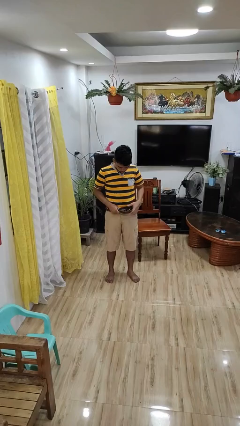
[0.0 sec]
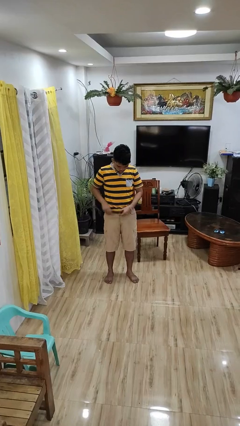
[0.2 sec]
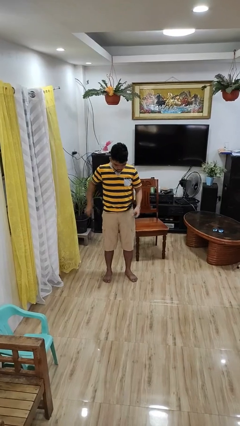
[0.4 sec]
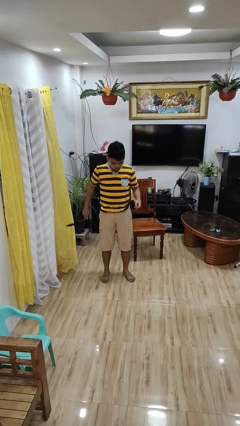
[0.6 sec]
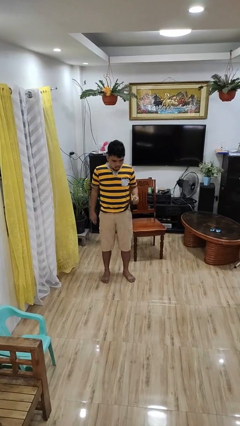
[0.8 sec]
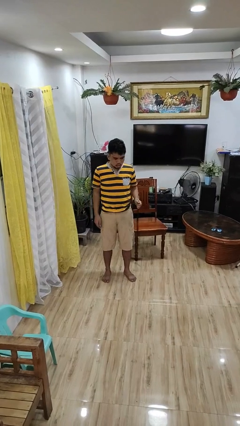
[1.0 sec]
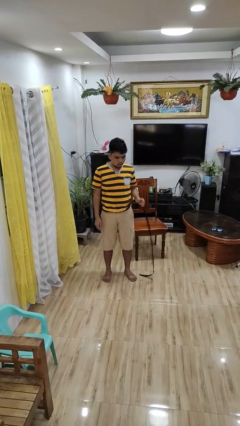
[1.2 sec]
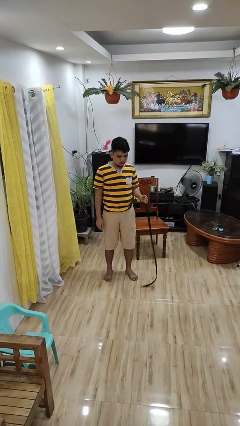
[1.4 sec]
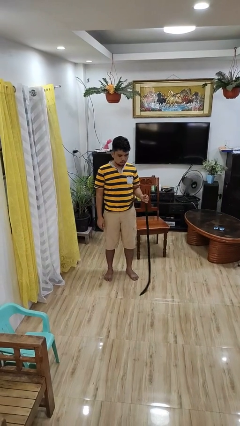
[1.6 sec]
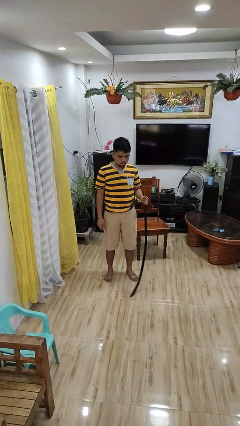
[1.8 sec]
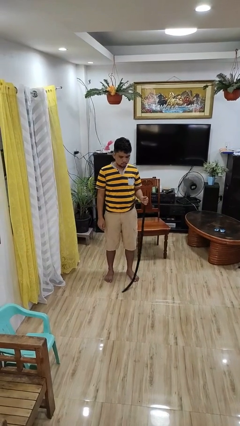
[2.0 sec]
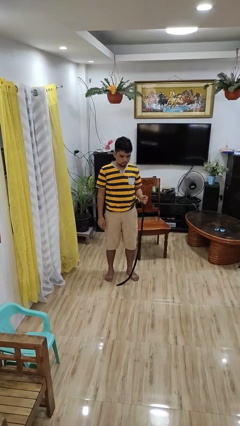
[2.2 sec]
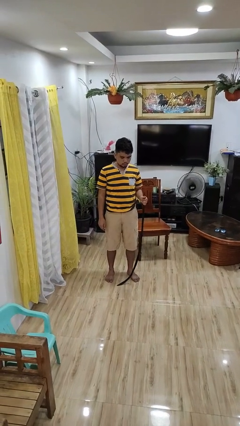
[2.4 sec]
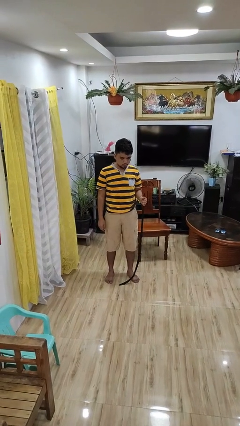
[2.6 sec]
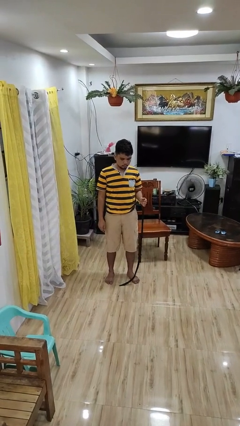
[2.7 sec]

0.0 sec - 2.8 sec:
person takes off belt

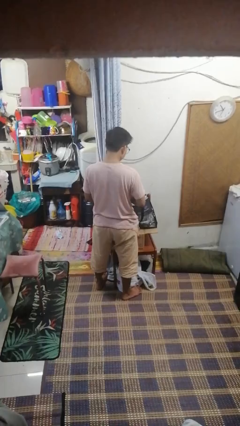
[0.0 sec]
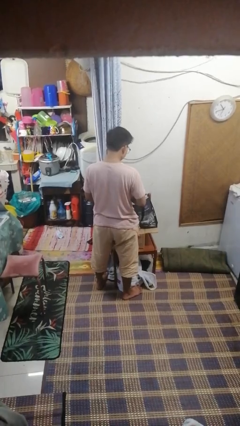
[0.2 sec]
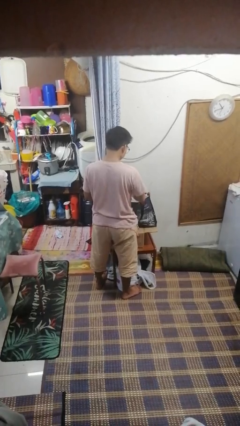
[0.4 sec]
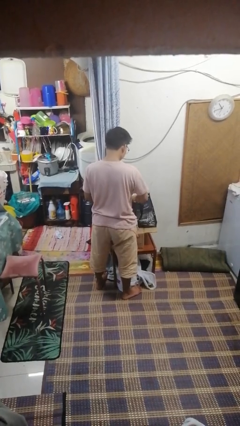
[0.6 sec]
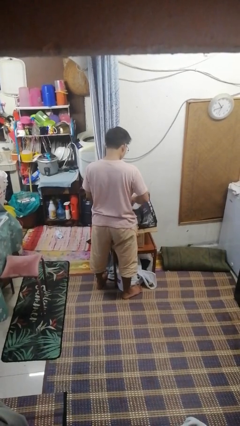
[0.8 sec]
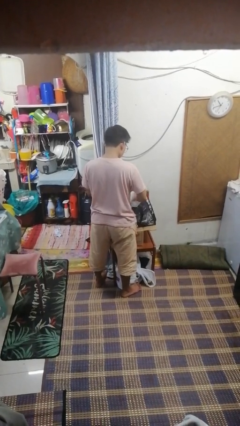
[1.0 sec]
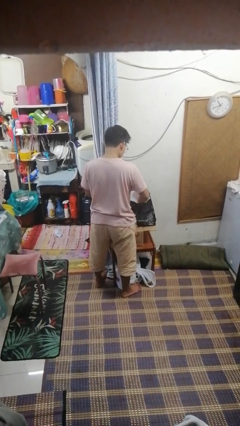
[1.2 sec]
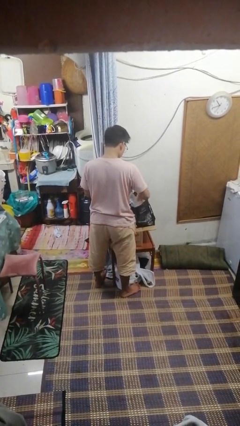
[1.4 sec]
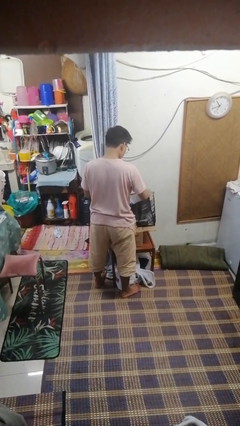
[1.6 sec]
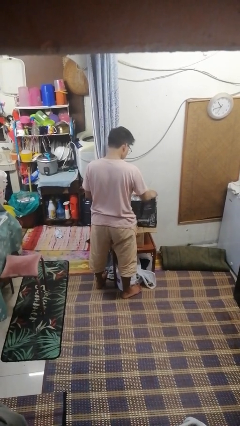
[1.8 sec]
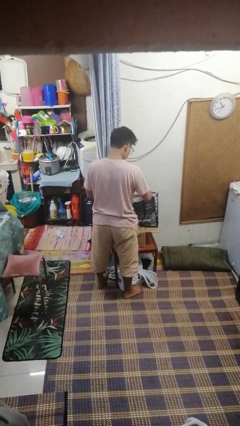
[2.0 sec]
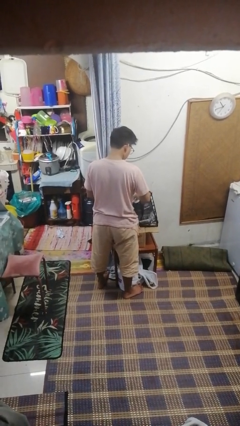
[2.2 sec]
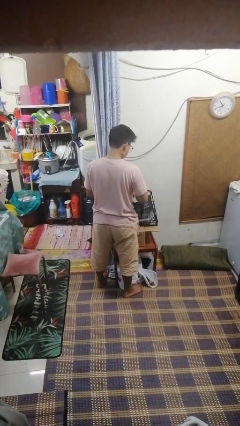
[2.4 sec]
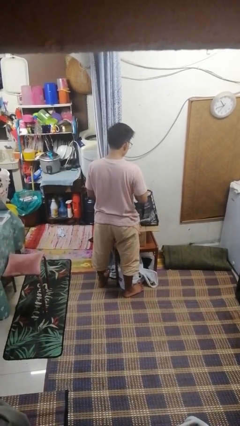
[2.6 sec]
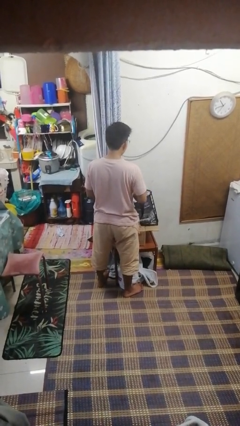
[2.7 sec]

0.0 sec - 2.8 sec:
person searches in bag

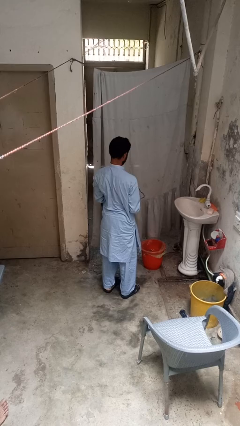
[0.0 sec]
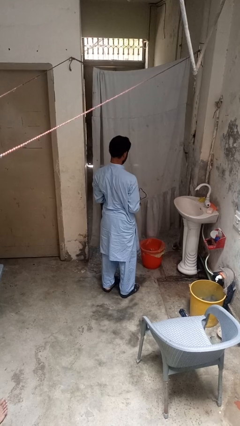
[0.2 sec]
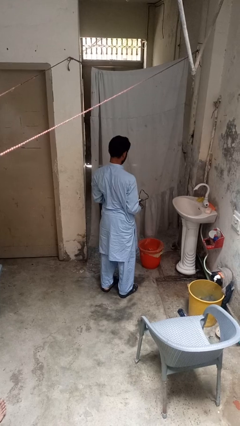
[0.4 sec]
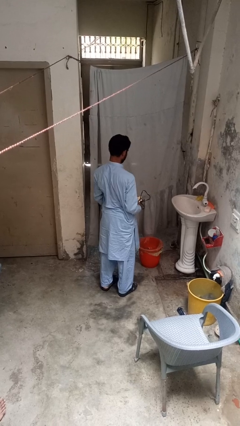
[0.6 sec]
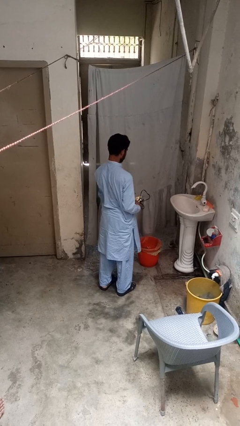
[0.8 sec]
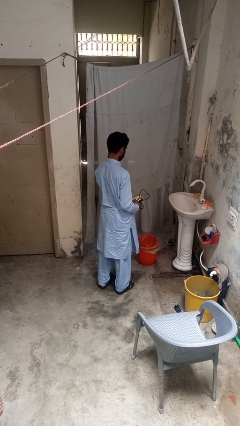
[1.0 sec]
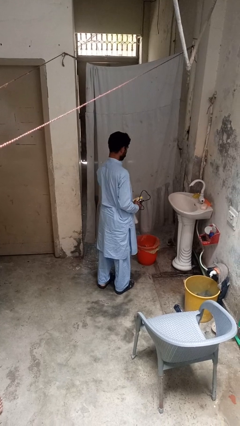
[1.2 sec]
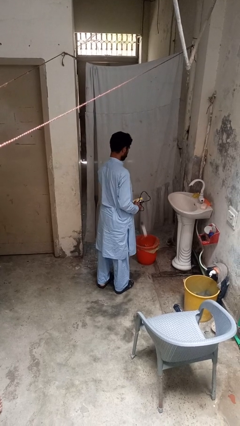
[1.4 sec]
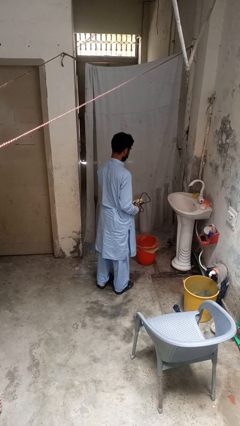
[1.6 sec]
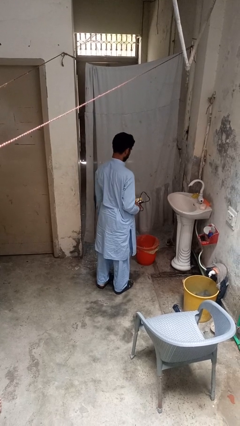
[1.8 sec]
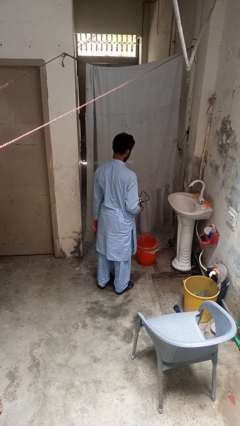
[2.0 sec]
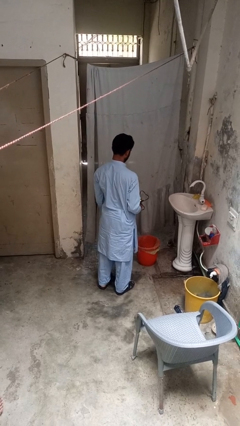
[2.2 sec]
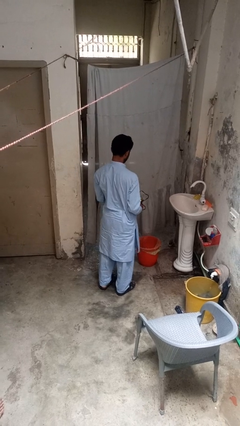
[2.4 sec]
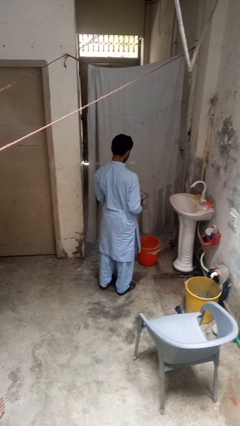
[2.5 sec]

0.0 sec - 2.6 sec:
person discards trash

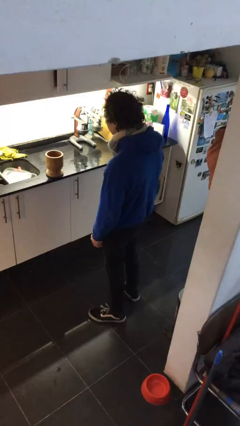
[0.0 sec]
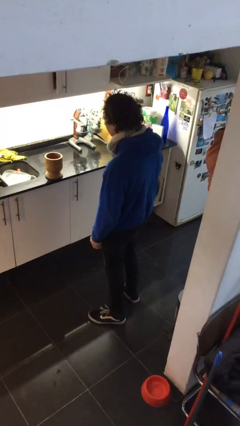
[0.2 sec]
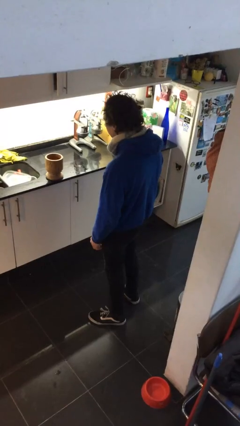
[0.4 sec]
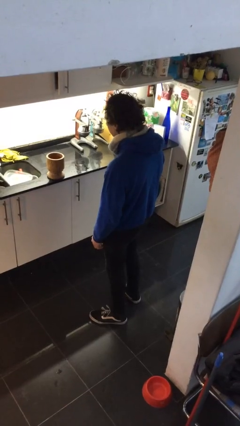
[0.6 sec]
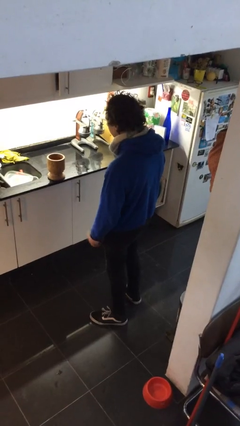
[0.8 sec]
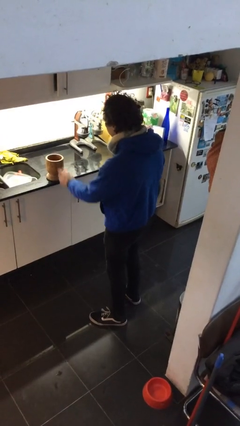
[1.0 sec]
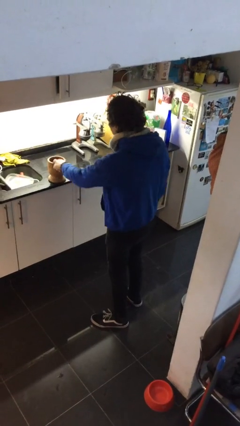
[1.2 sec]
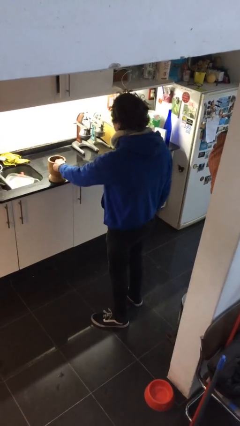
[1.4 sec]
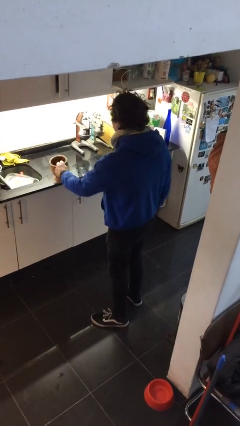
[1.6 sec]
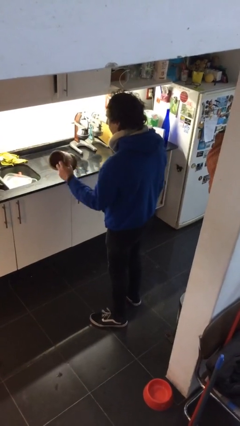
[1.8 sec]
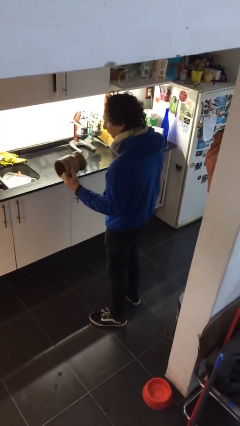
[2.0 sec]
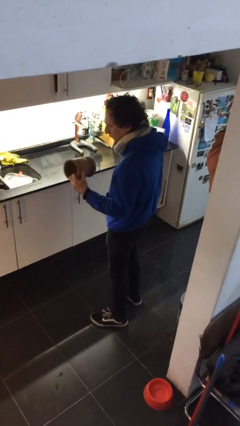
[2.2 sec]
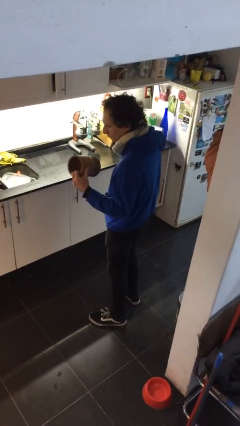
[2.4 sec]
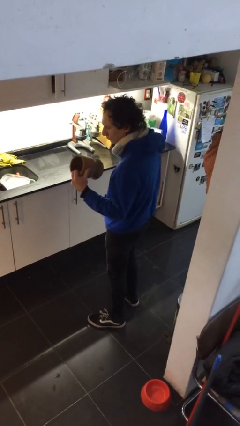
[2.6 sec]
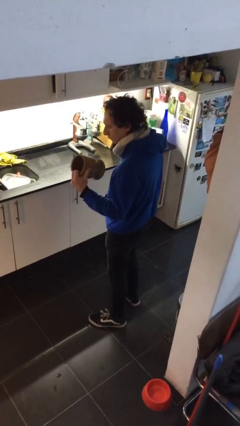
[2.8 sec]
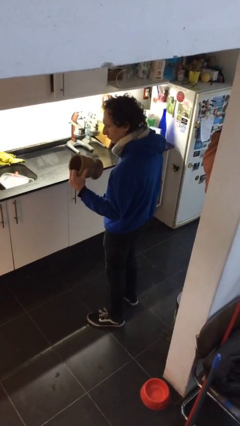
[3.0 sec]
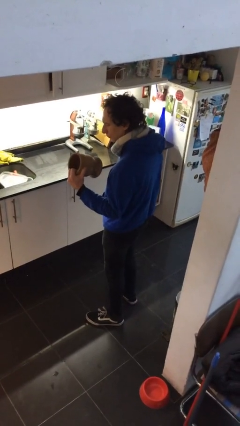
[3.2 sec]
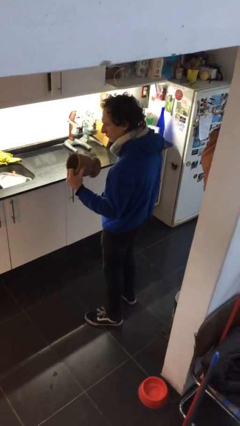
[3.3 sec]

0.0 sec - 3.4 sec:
person picks up object from countertop

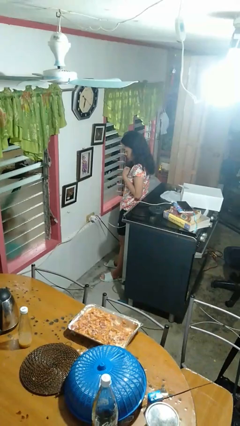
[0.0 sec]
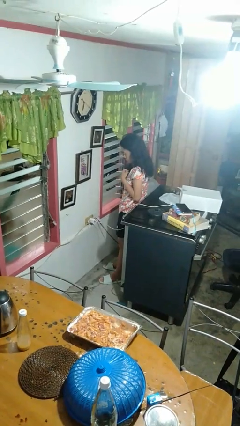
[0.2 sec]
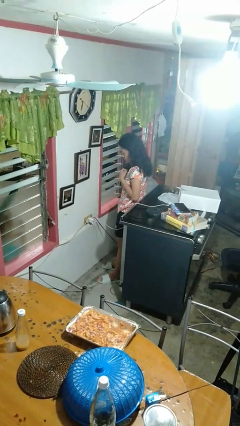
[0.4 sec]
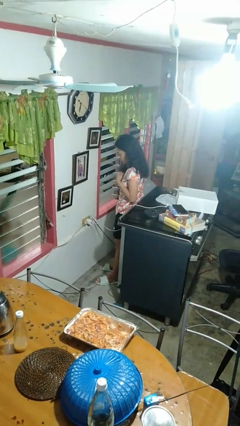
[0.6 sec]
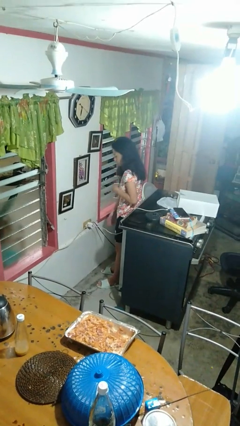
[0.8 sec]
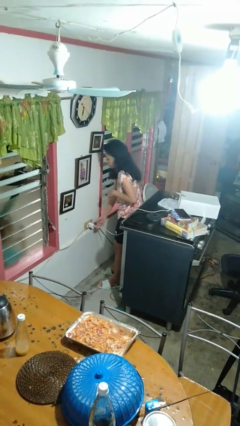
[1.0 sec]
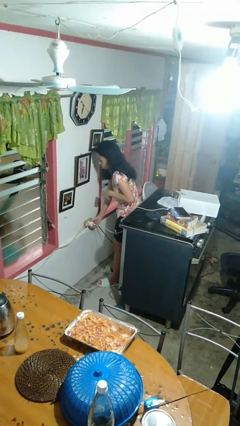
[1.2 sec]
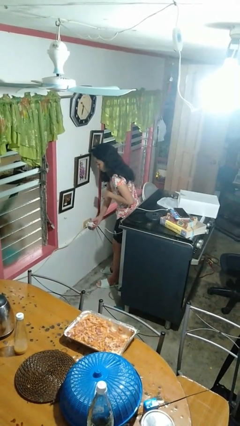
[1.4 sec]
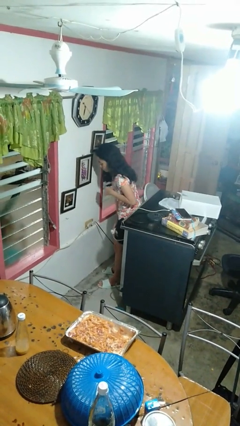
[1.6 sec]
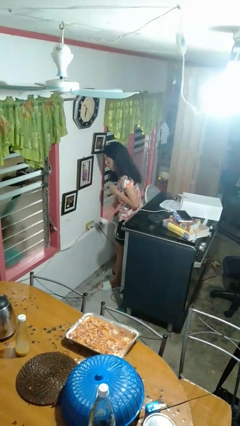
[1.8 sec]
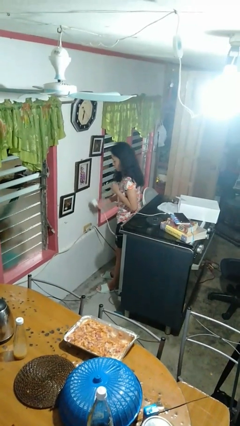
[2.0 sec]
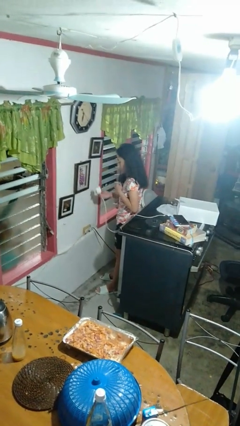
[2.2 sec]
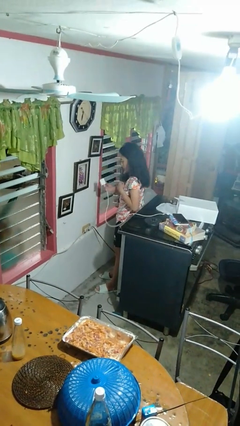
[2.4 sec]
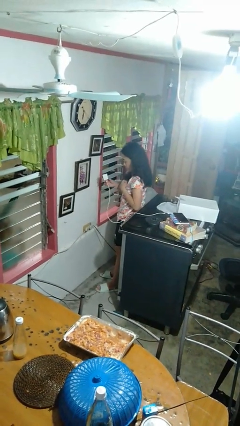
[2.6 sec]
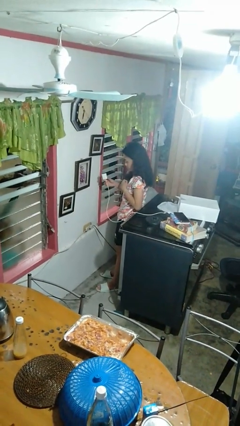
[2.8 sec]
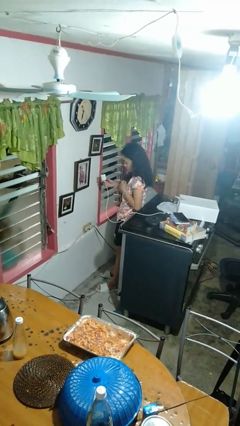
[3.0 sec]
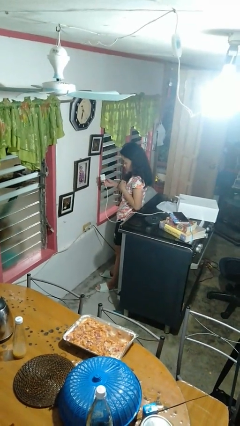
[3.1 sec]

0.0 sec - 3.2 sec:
person unplugs from electrical socket

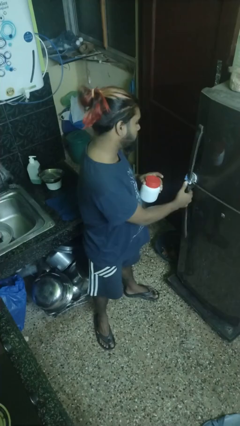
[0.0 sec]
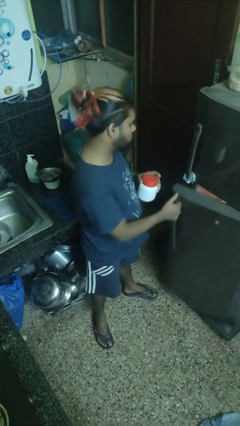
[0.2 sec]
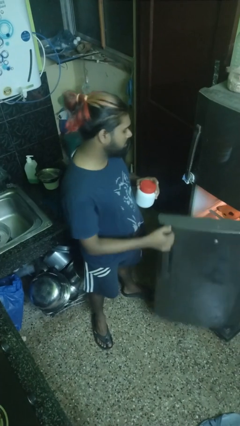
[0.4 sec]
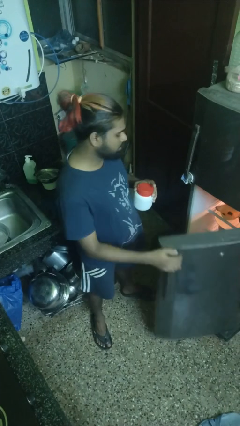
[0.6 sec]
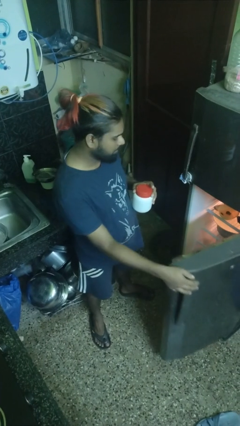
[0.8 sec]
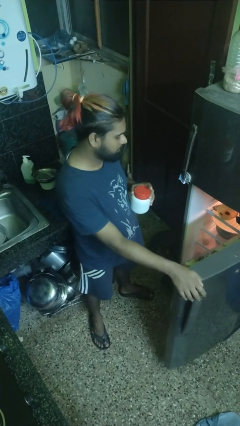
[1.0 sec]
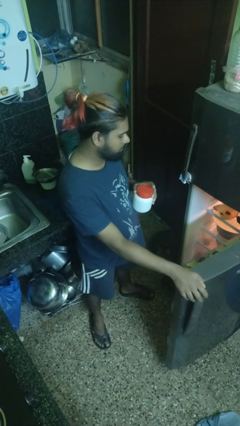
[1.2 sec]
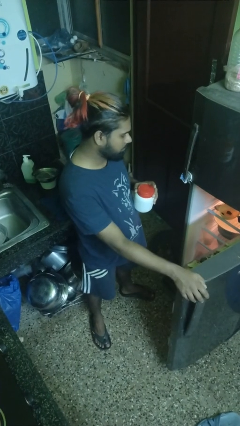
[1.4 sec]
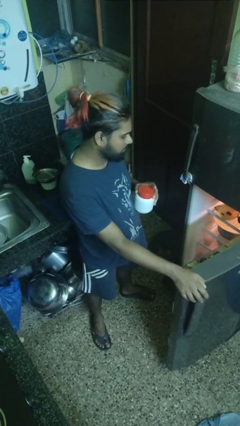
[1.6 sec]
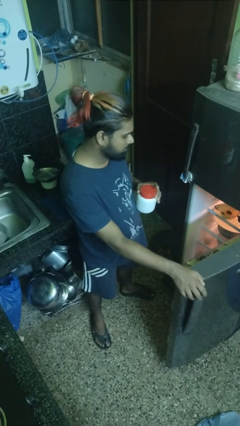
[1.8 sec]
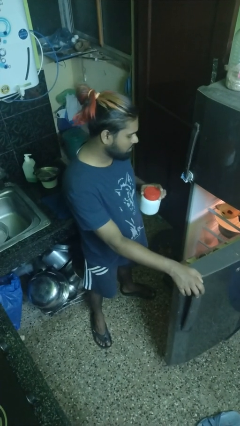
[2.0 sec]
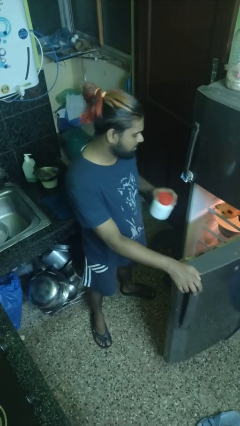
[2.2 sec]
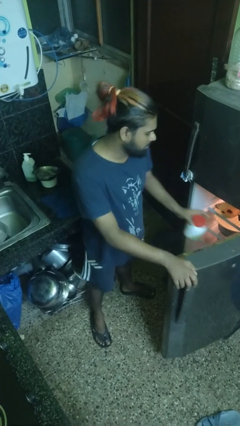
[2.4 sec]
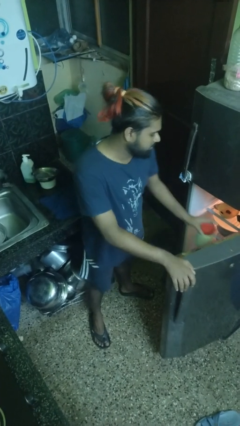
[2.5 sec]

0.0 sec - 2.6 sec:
person opens refrigerator
